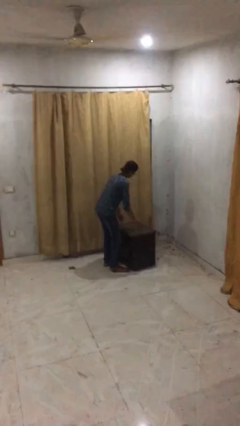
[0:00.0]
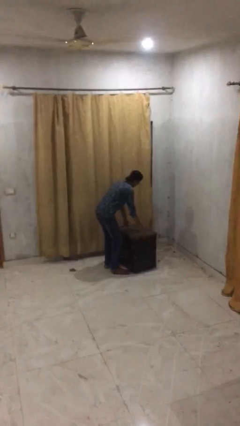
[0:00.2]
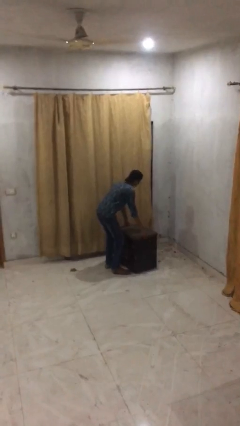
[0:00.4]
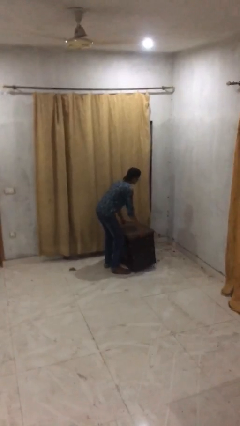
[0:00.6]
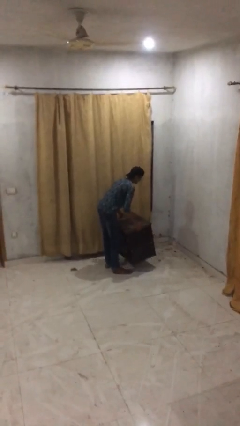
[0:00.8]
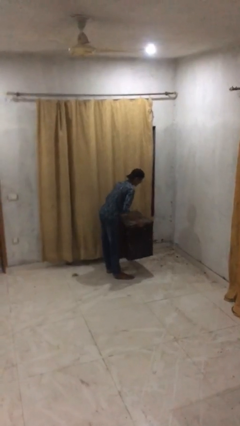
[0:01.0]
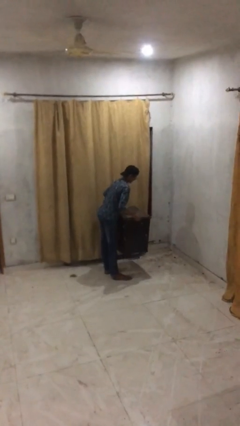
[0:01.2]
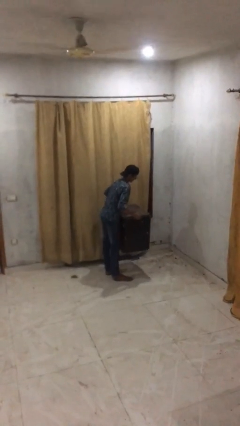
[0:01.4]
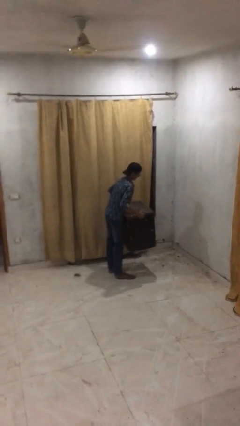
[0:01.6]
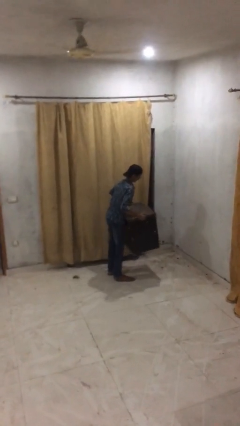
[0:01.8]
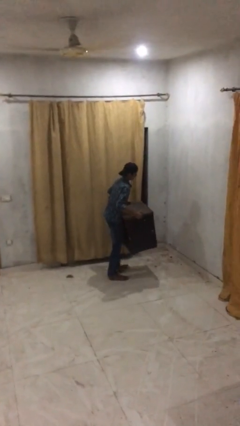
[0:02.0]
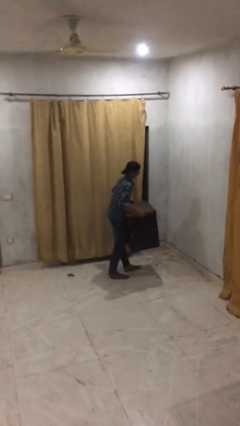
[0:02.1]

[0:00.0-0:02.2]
person picks up object from floor

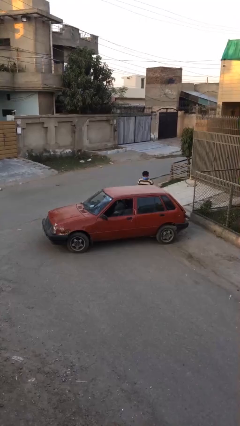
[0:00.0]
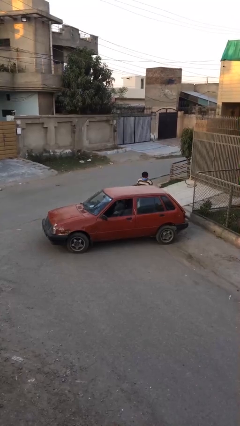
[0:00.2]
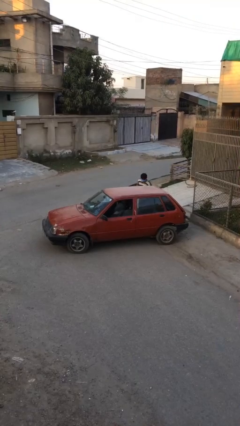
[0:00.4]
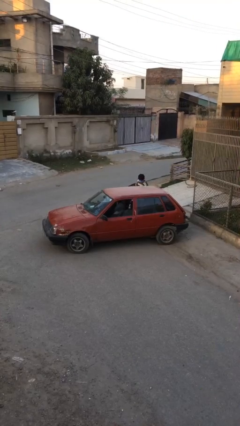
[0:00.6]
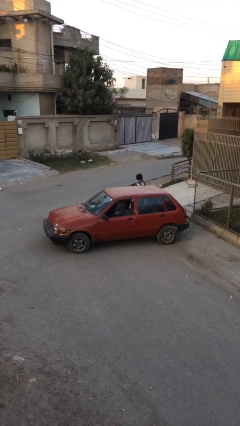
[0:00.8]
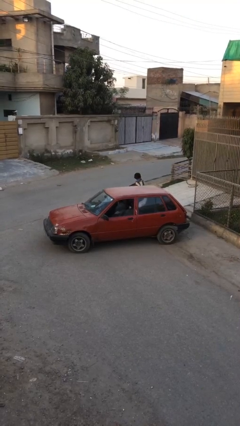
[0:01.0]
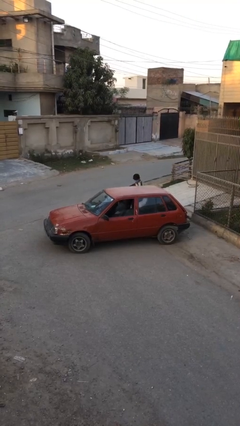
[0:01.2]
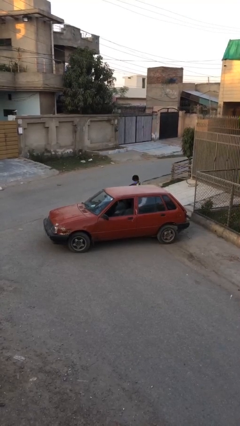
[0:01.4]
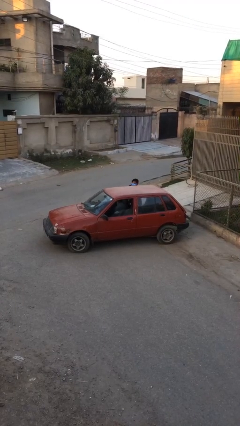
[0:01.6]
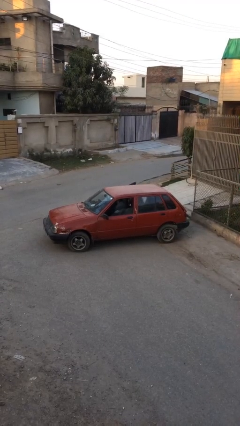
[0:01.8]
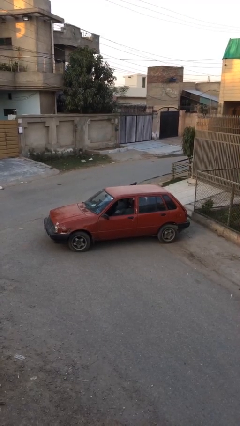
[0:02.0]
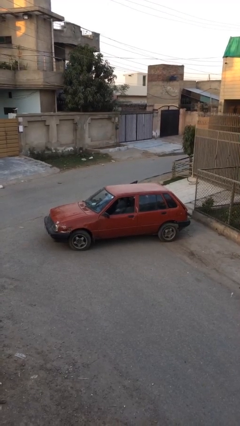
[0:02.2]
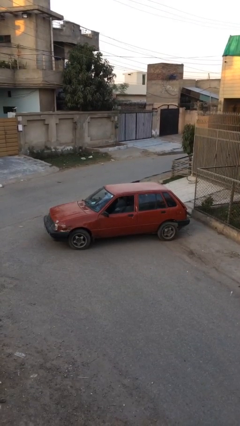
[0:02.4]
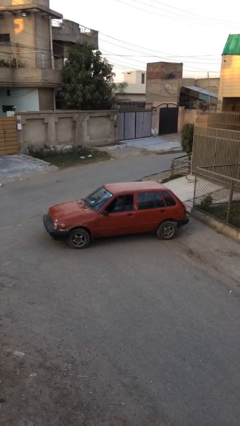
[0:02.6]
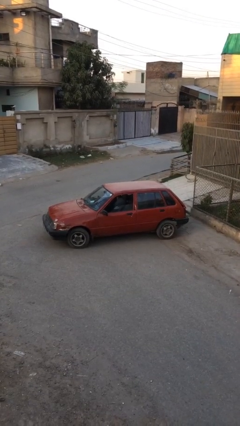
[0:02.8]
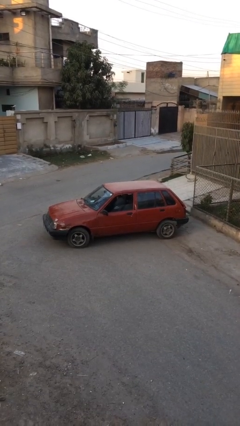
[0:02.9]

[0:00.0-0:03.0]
car picks up person

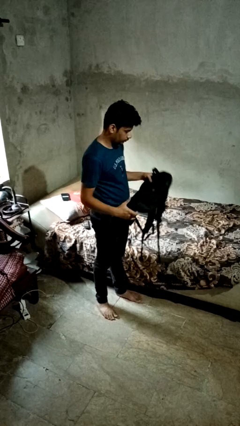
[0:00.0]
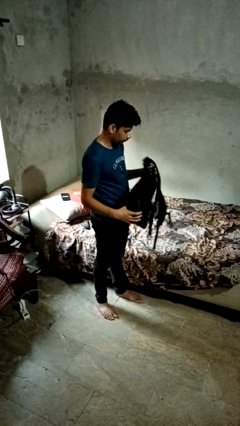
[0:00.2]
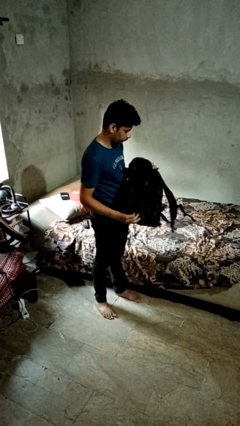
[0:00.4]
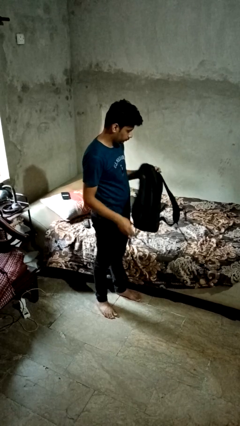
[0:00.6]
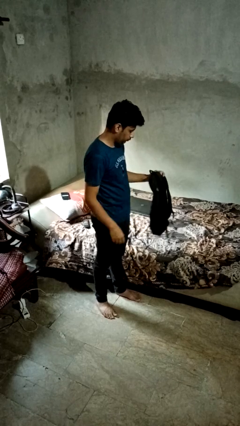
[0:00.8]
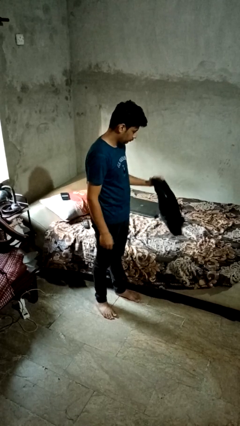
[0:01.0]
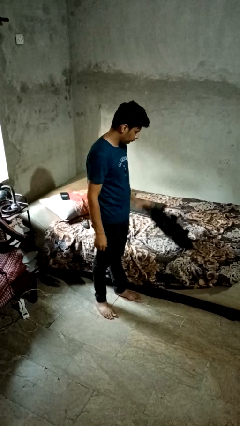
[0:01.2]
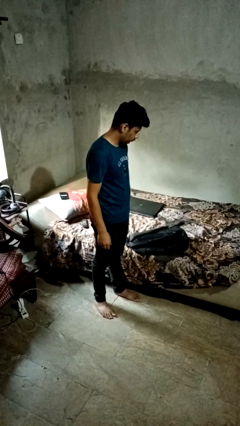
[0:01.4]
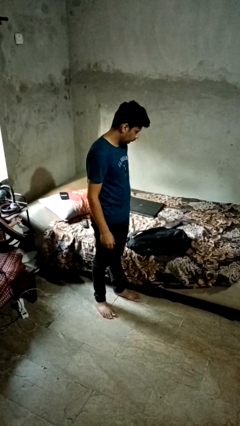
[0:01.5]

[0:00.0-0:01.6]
person puts down object on bed

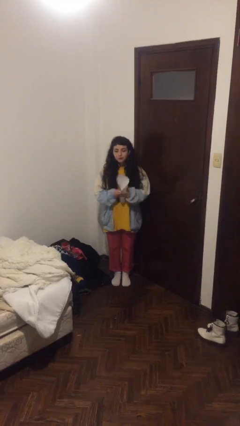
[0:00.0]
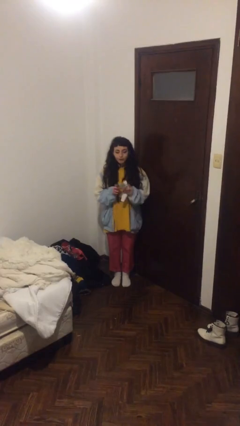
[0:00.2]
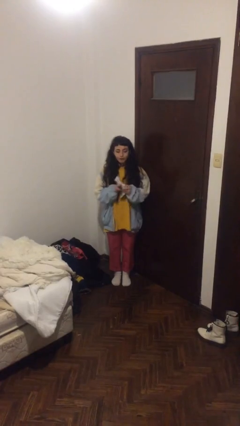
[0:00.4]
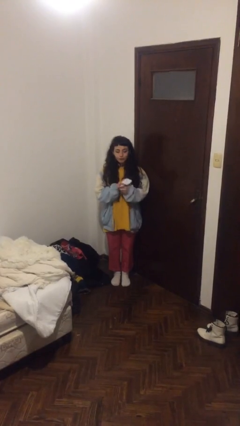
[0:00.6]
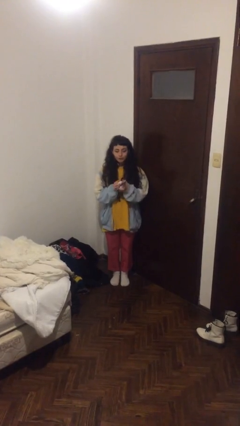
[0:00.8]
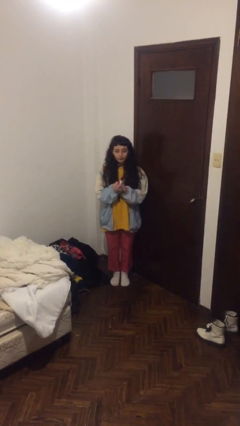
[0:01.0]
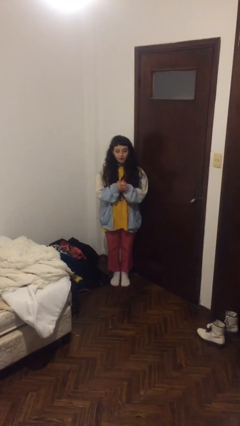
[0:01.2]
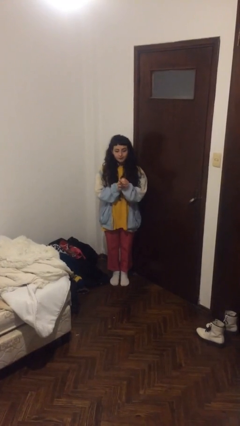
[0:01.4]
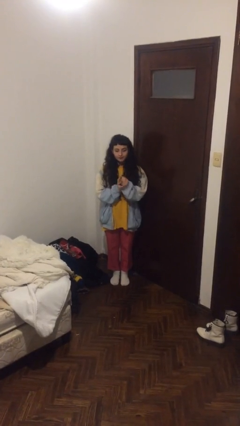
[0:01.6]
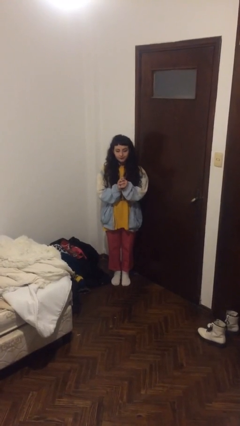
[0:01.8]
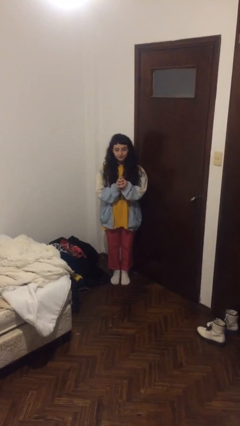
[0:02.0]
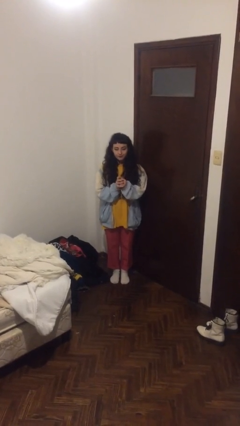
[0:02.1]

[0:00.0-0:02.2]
person crumples paper

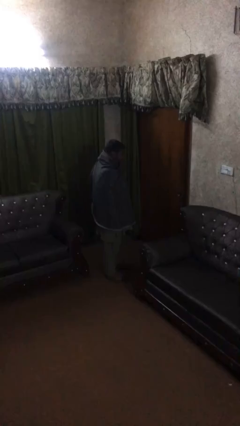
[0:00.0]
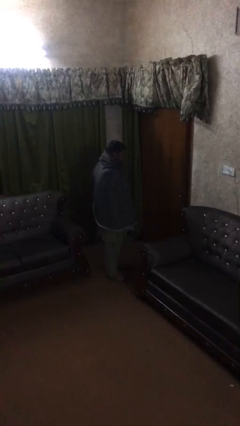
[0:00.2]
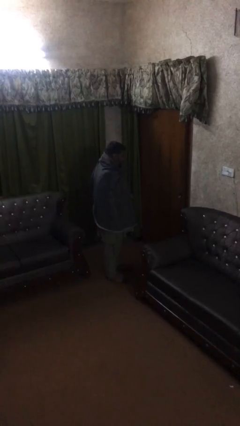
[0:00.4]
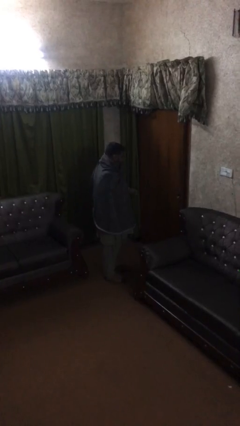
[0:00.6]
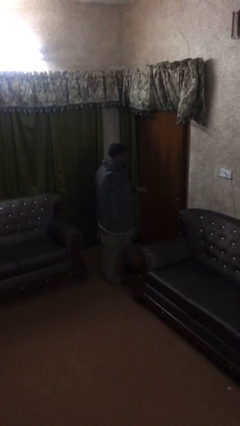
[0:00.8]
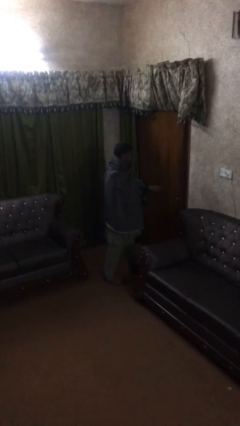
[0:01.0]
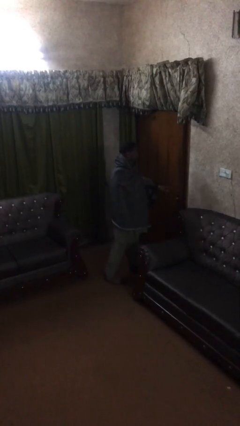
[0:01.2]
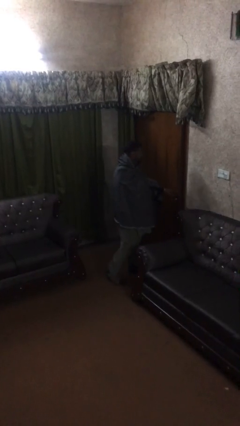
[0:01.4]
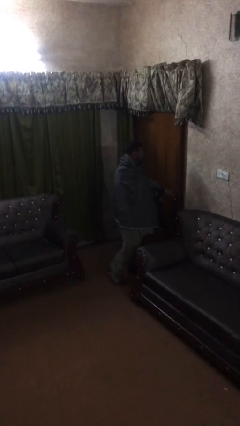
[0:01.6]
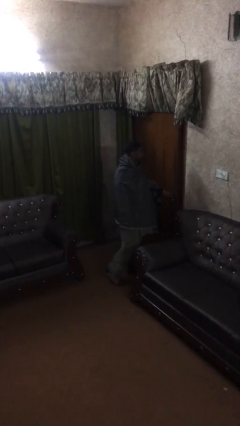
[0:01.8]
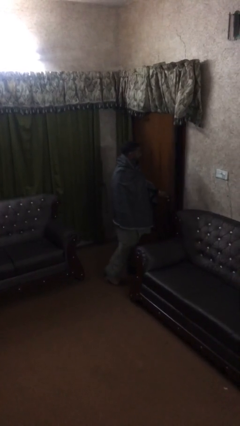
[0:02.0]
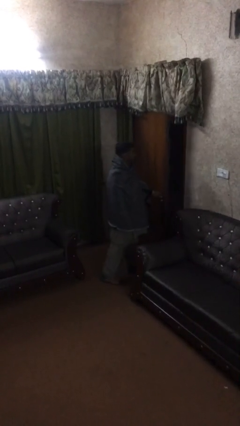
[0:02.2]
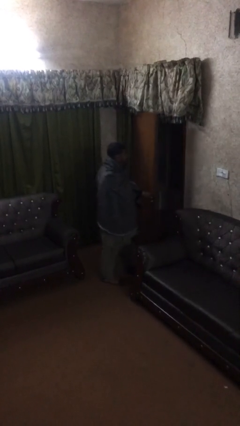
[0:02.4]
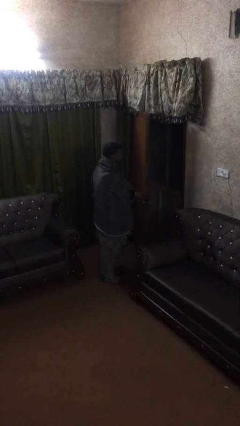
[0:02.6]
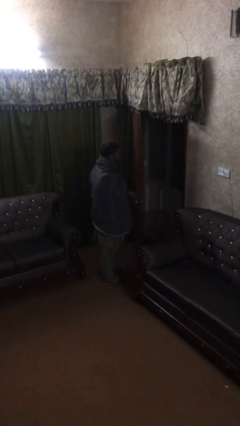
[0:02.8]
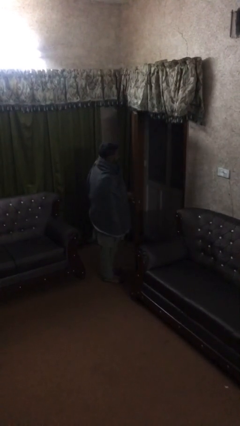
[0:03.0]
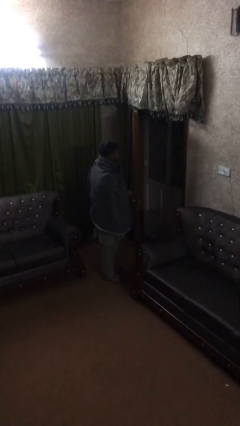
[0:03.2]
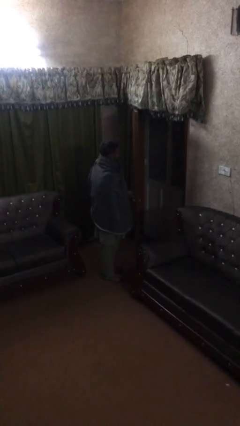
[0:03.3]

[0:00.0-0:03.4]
person opens facility door

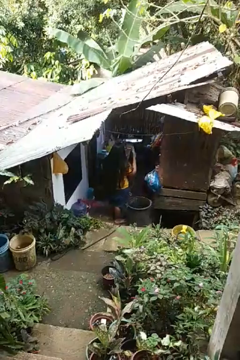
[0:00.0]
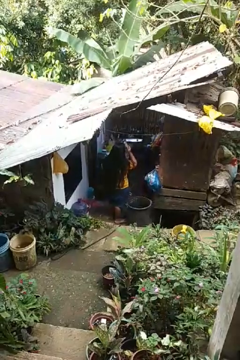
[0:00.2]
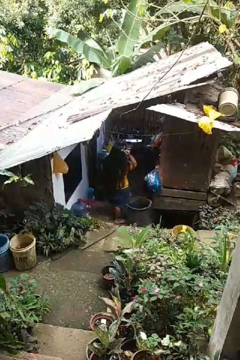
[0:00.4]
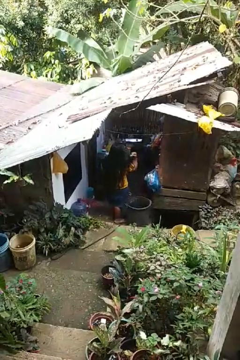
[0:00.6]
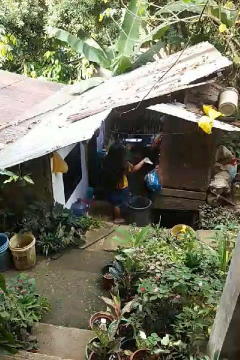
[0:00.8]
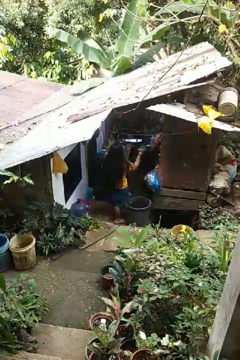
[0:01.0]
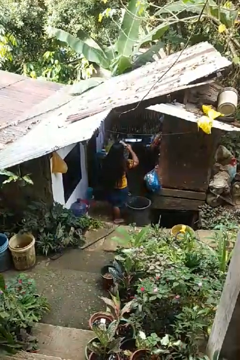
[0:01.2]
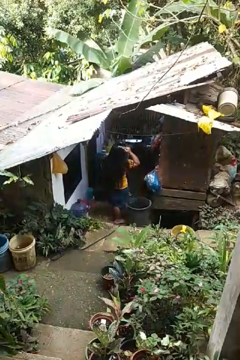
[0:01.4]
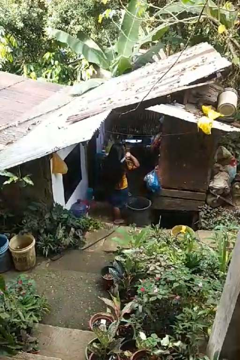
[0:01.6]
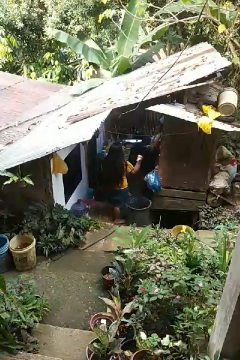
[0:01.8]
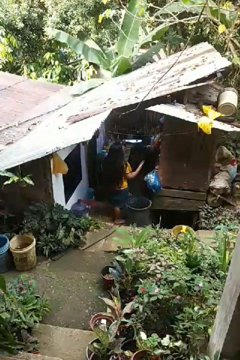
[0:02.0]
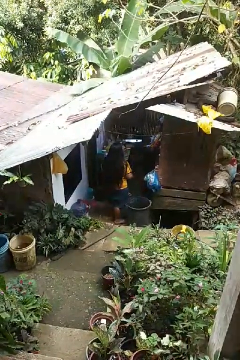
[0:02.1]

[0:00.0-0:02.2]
person brushes hair

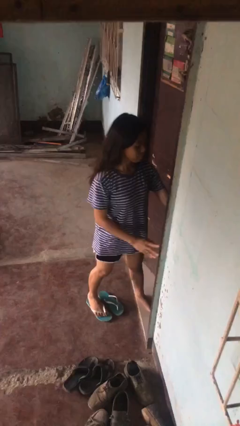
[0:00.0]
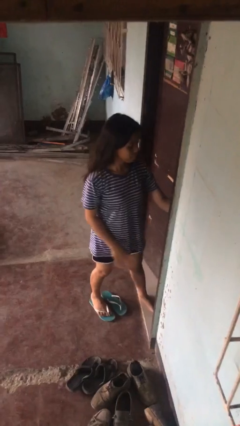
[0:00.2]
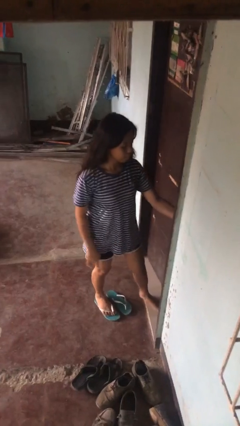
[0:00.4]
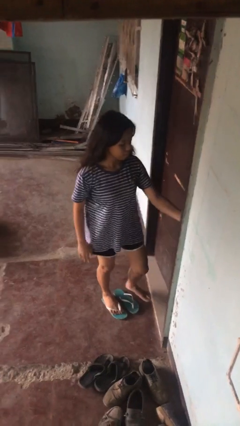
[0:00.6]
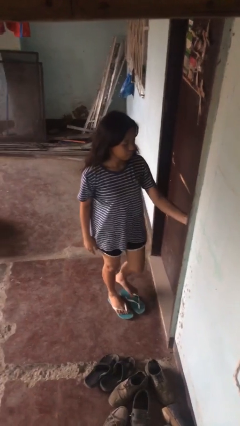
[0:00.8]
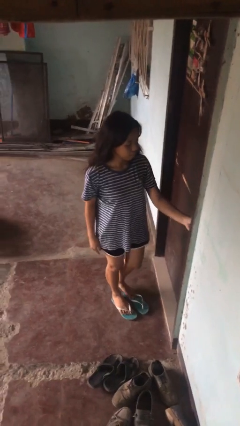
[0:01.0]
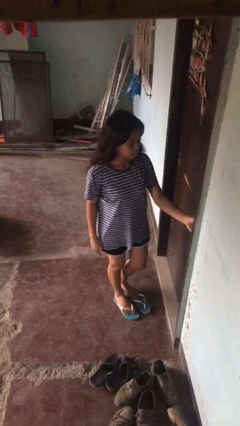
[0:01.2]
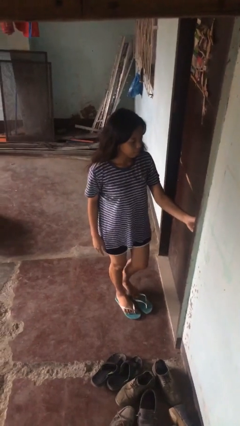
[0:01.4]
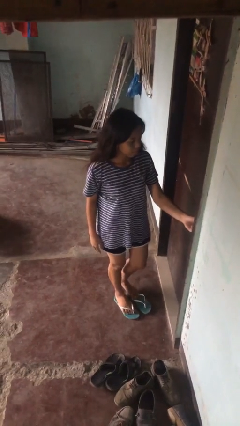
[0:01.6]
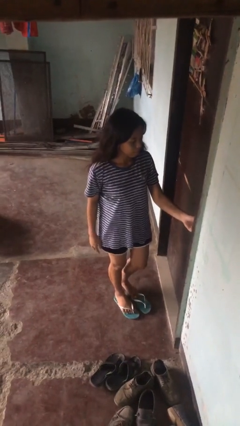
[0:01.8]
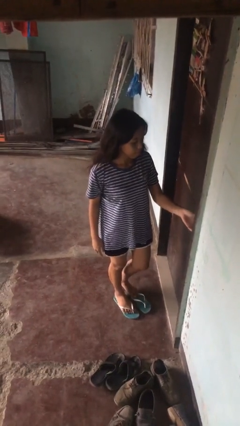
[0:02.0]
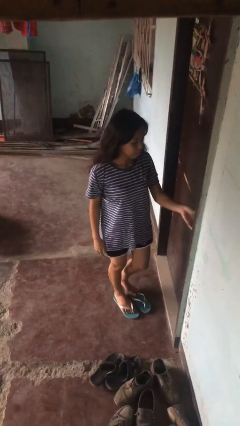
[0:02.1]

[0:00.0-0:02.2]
person closes facility door

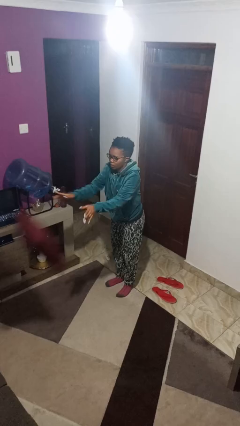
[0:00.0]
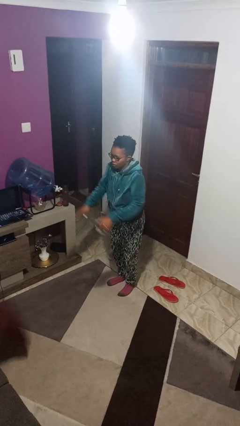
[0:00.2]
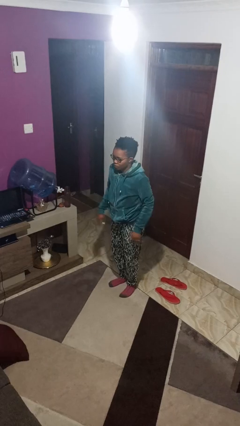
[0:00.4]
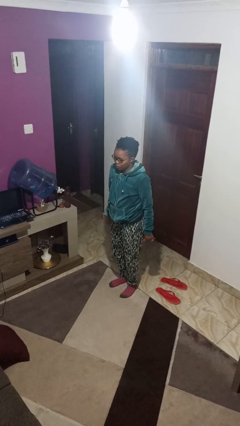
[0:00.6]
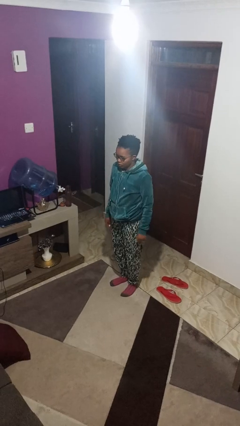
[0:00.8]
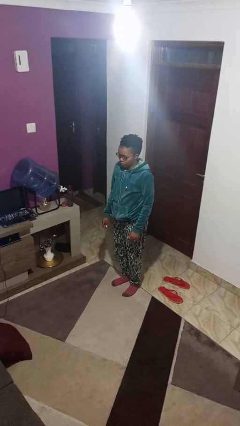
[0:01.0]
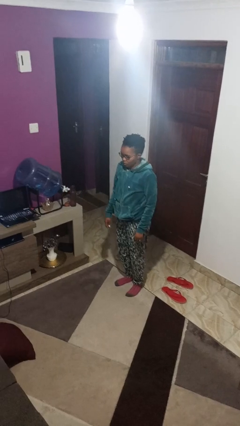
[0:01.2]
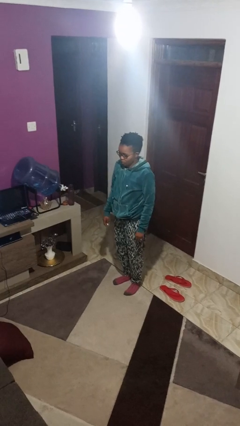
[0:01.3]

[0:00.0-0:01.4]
person throws object to ground
